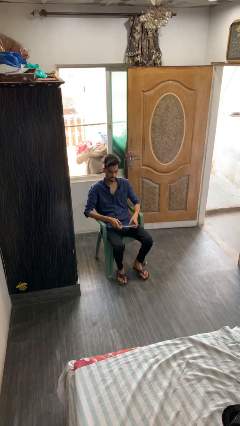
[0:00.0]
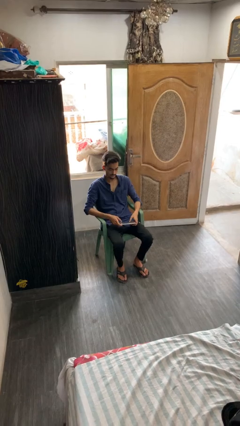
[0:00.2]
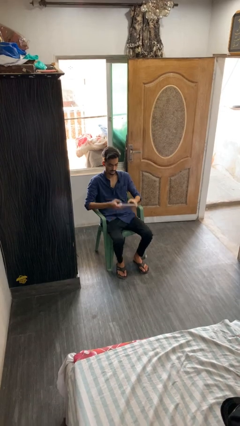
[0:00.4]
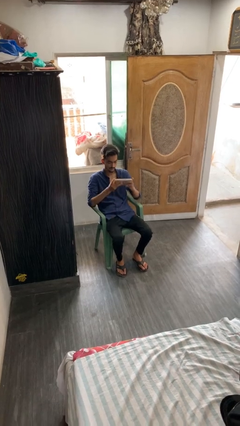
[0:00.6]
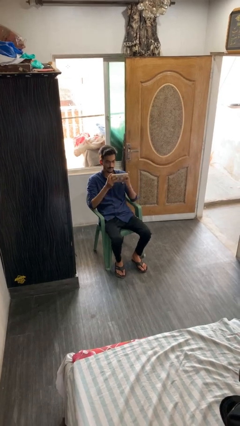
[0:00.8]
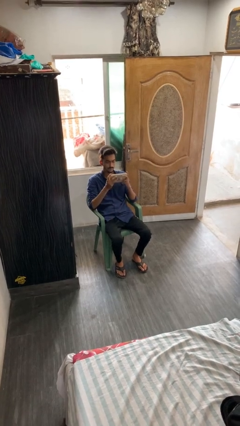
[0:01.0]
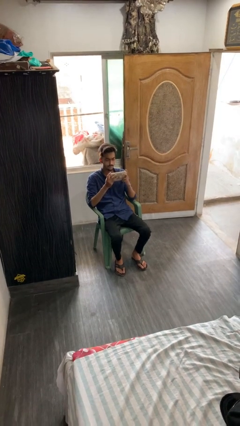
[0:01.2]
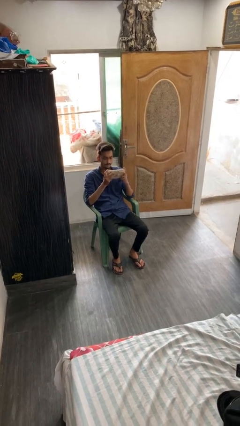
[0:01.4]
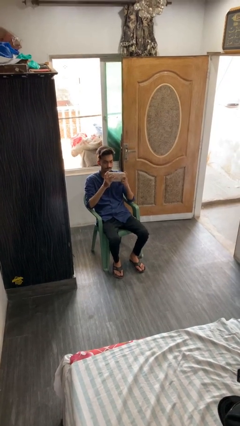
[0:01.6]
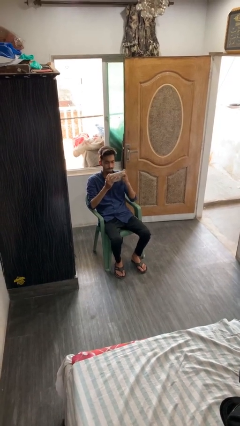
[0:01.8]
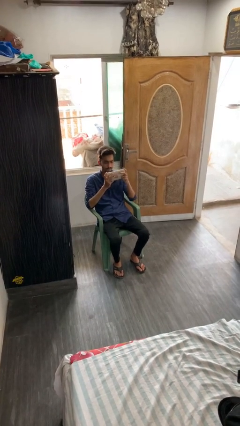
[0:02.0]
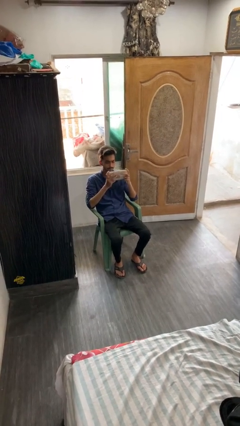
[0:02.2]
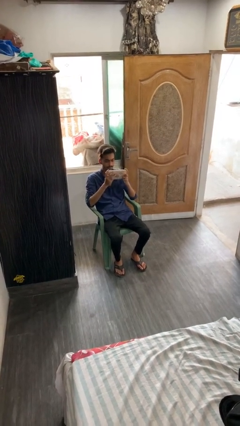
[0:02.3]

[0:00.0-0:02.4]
person interacts with tablet

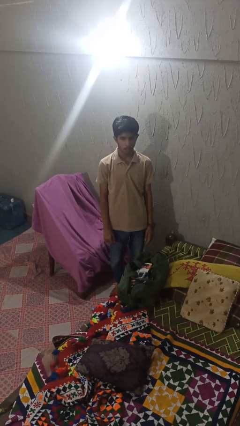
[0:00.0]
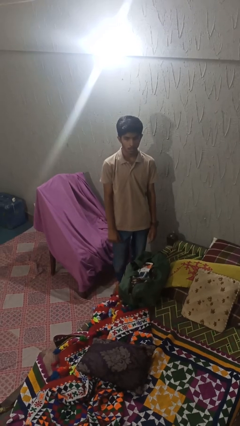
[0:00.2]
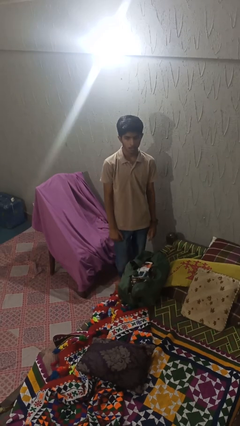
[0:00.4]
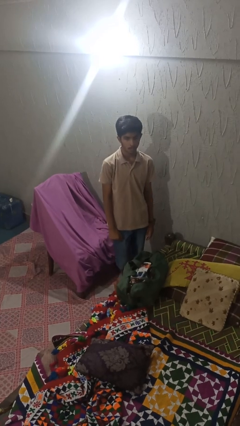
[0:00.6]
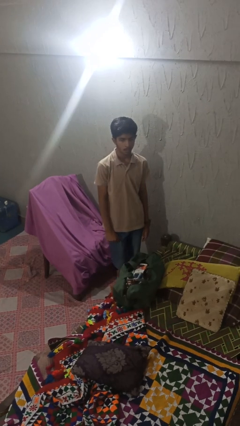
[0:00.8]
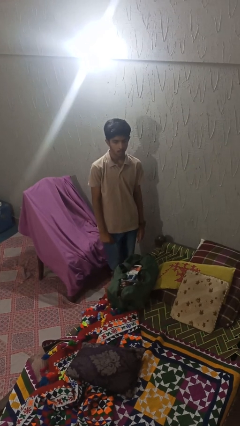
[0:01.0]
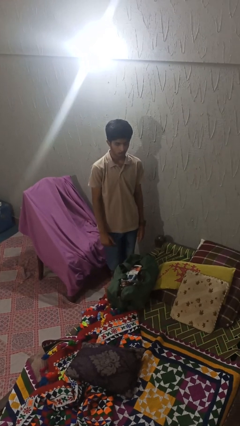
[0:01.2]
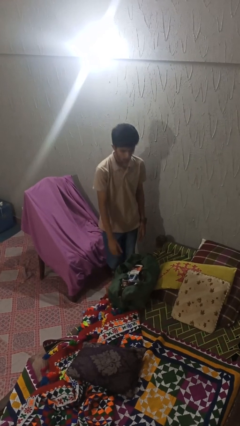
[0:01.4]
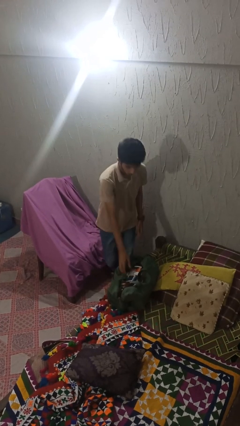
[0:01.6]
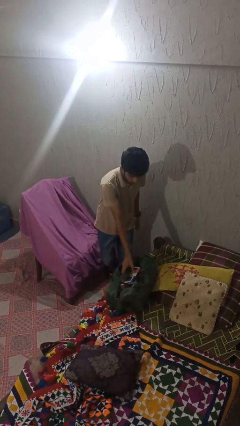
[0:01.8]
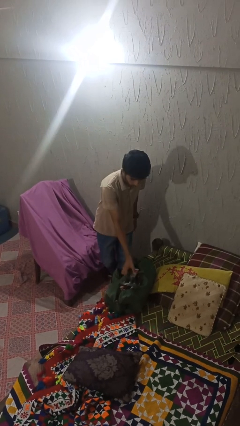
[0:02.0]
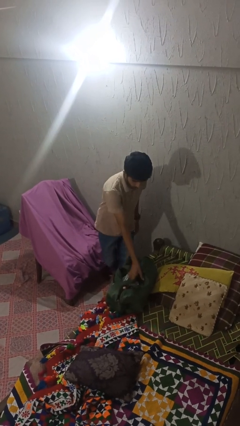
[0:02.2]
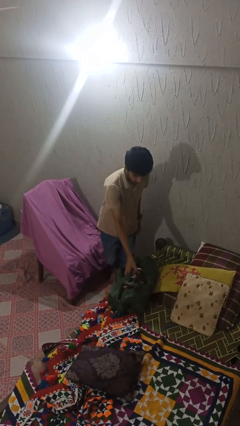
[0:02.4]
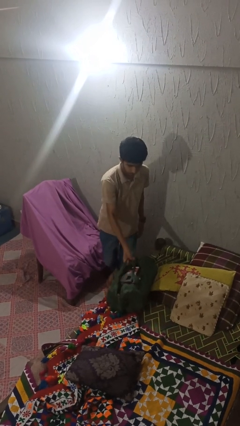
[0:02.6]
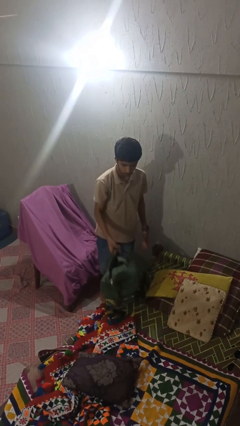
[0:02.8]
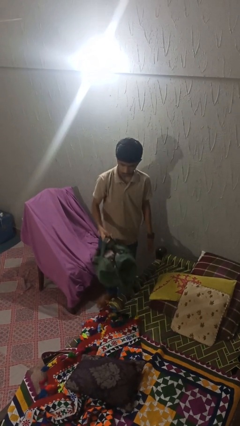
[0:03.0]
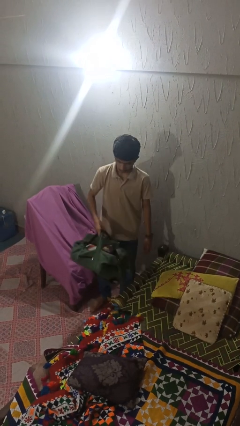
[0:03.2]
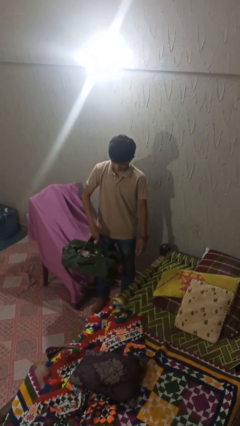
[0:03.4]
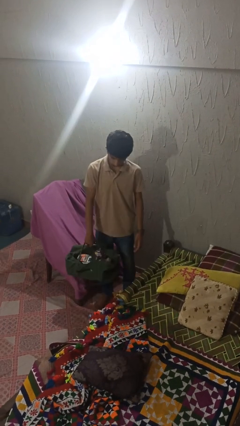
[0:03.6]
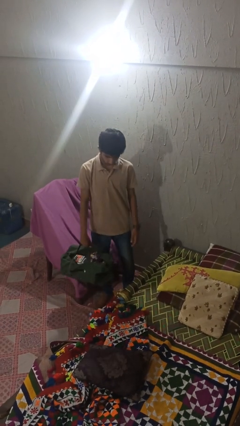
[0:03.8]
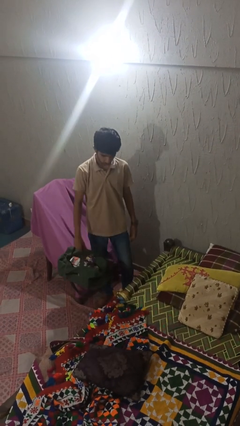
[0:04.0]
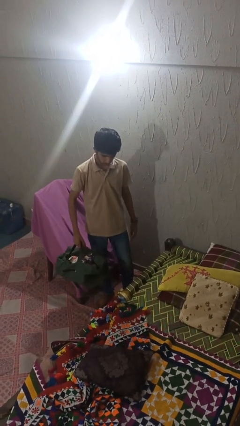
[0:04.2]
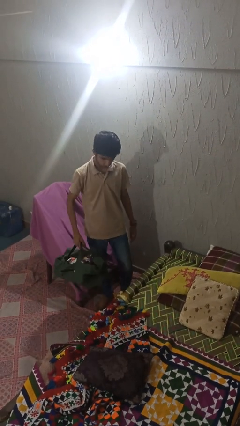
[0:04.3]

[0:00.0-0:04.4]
person picks up object from bed

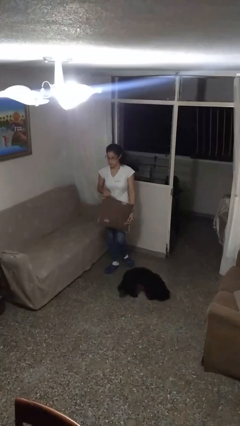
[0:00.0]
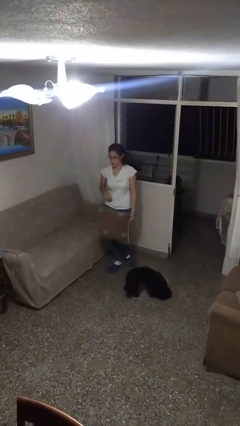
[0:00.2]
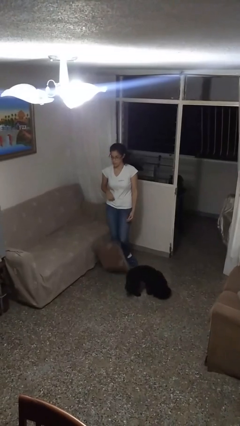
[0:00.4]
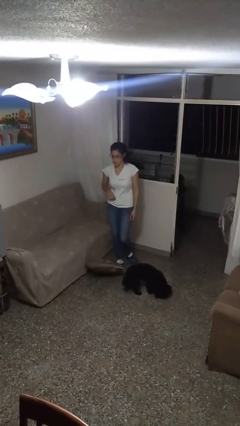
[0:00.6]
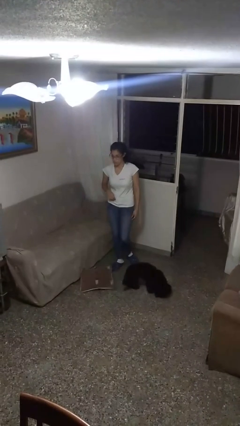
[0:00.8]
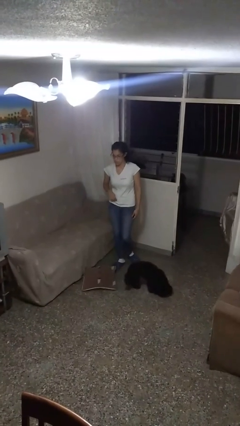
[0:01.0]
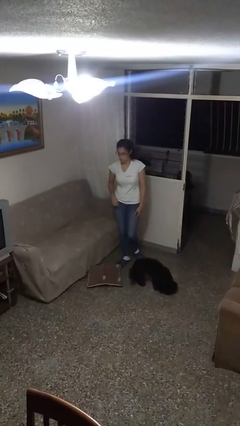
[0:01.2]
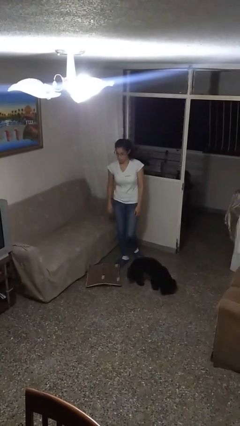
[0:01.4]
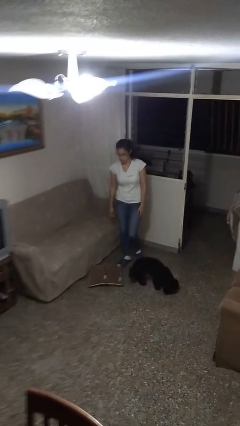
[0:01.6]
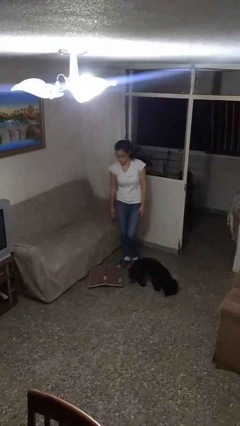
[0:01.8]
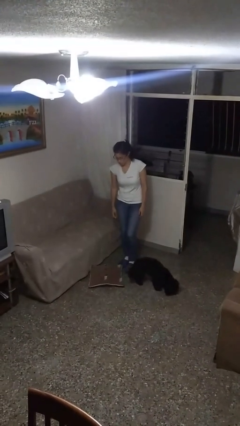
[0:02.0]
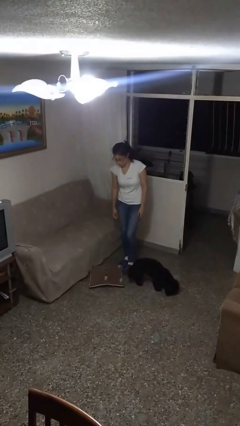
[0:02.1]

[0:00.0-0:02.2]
person drops object

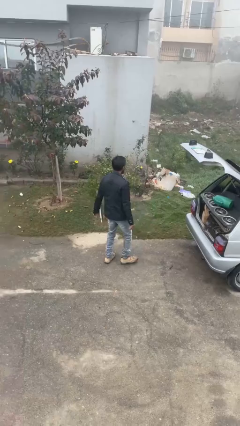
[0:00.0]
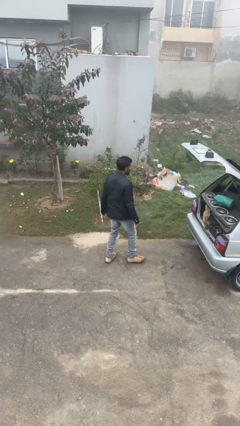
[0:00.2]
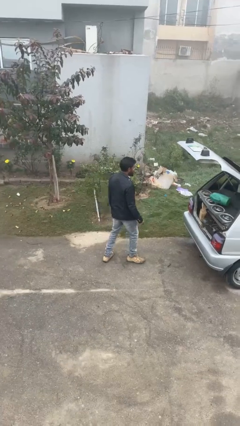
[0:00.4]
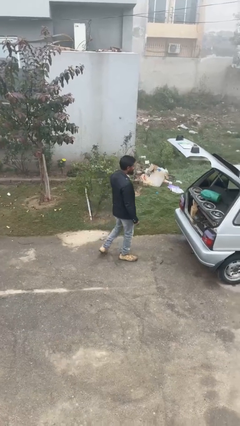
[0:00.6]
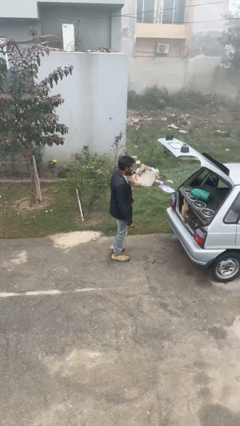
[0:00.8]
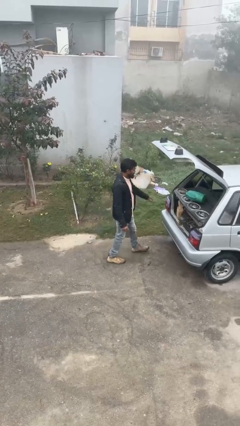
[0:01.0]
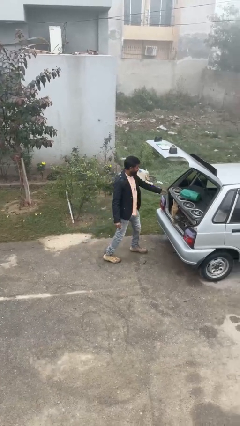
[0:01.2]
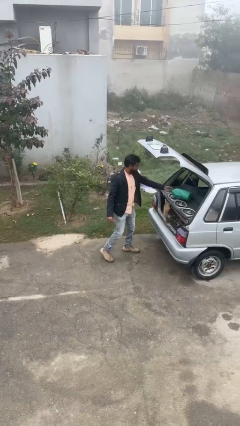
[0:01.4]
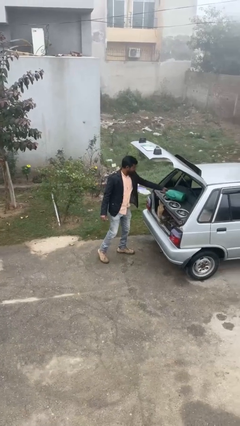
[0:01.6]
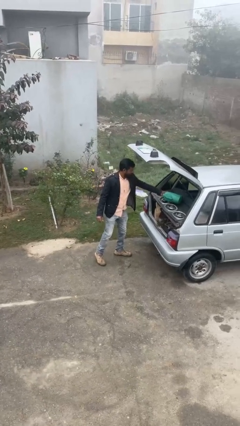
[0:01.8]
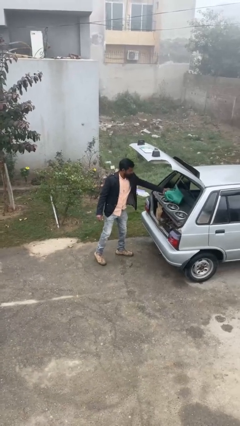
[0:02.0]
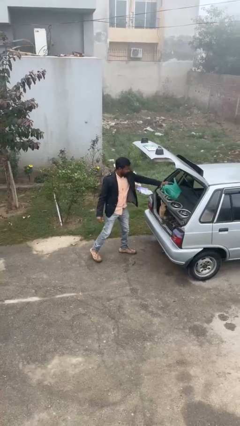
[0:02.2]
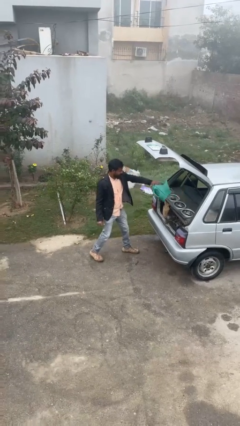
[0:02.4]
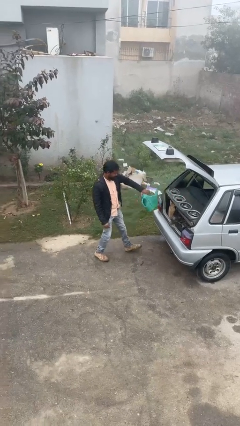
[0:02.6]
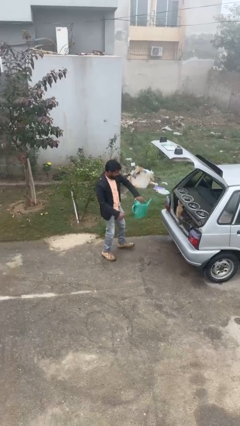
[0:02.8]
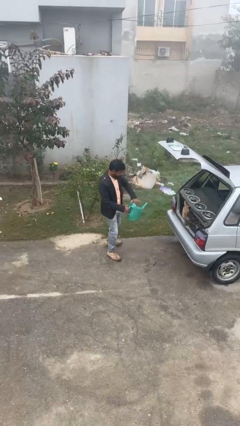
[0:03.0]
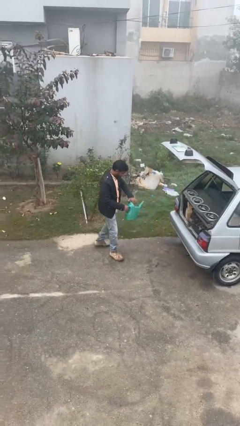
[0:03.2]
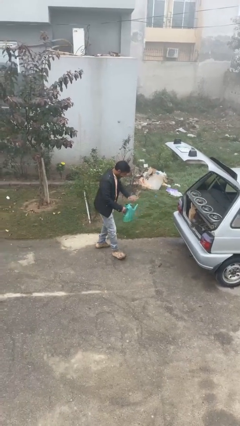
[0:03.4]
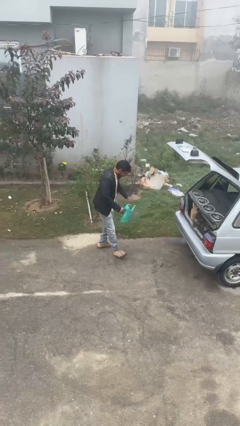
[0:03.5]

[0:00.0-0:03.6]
person unloads car

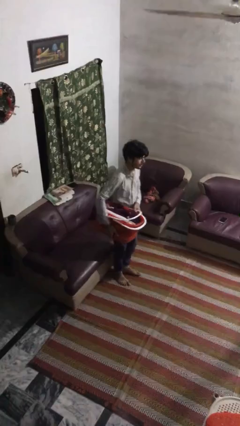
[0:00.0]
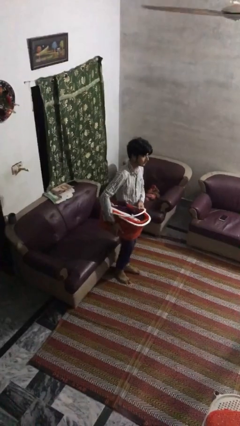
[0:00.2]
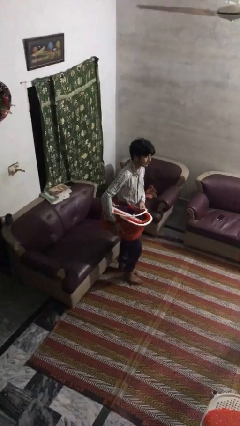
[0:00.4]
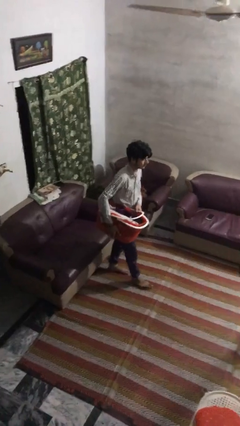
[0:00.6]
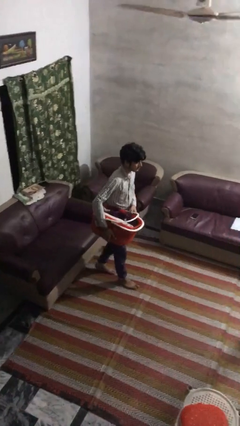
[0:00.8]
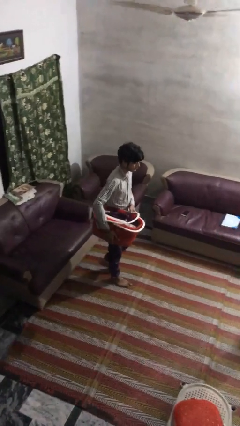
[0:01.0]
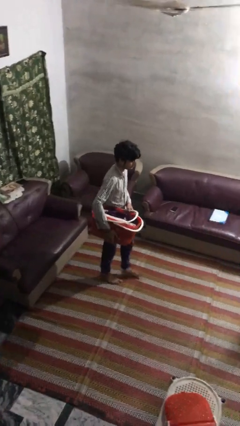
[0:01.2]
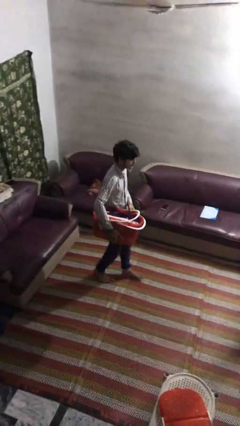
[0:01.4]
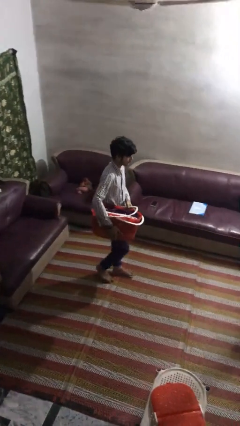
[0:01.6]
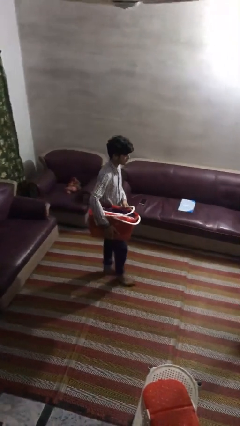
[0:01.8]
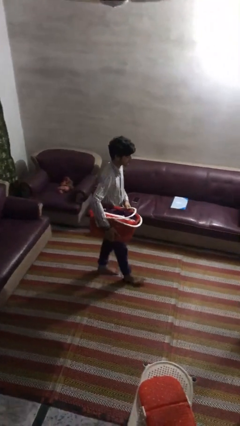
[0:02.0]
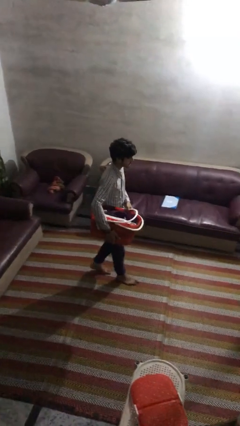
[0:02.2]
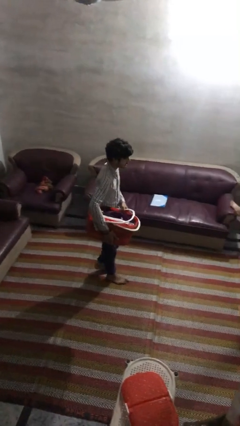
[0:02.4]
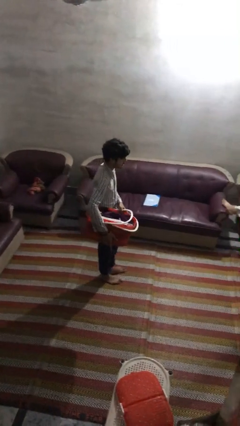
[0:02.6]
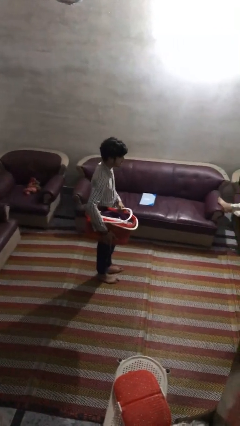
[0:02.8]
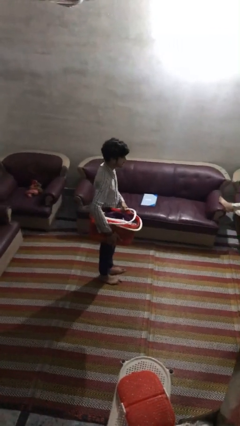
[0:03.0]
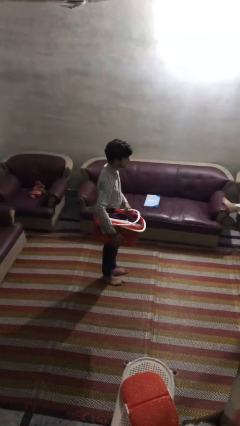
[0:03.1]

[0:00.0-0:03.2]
person carries laundry basket

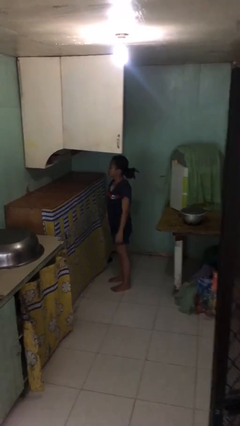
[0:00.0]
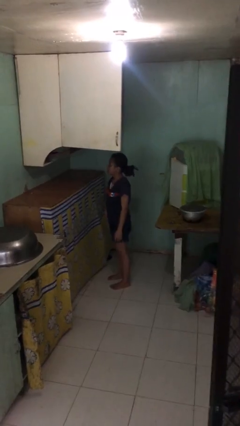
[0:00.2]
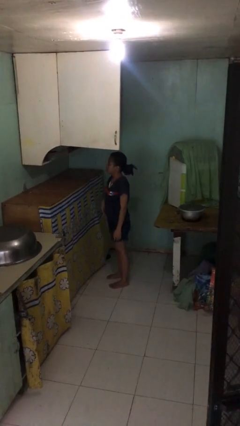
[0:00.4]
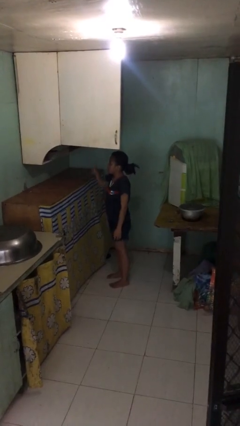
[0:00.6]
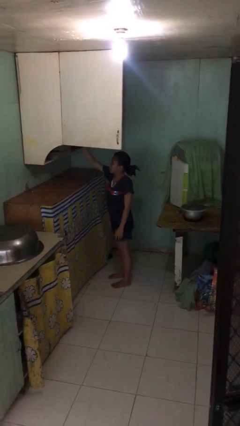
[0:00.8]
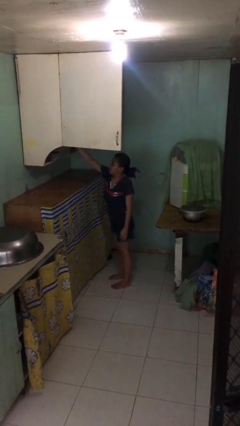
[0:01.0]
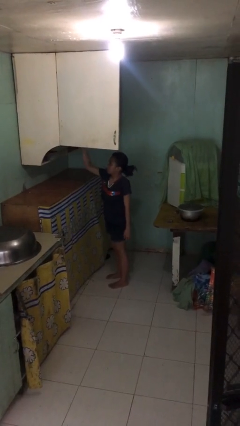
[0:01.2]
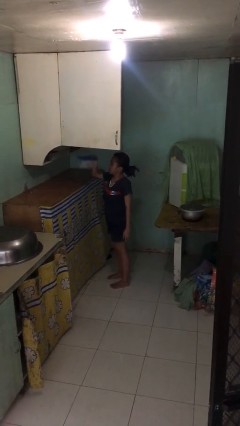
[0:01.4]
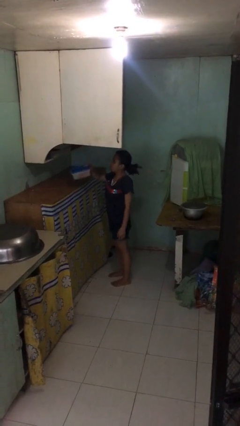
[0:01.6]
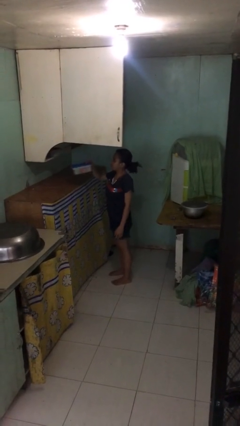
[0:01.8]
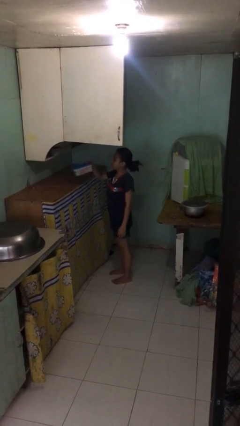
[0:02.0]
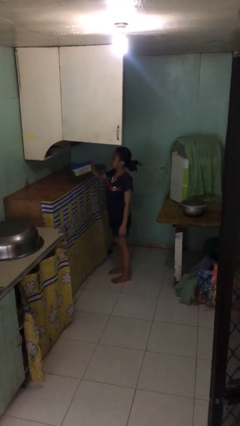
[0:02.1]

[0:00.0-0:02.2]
person picks up object from shelf
